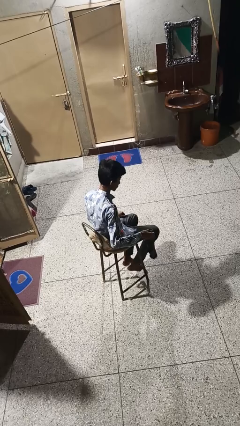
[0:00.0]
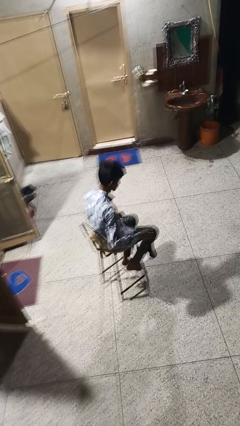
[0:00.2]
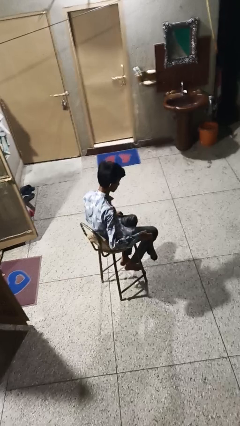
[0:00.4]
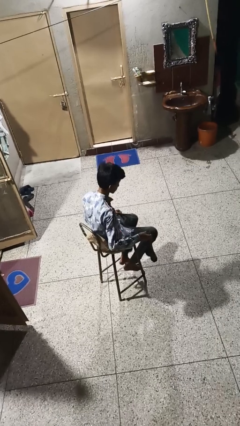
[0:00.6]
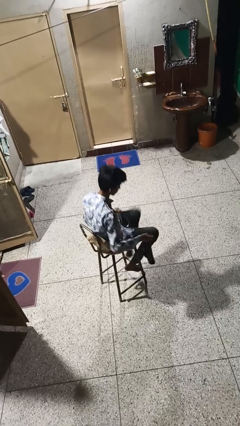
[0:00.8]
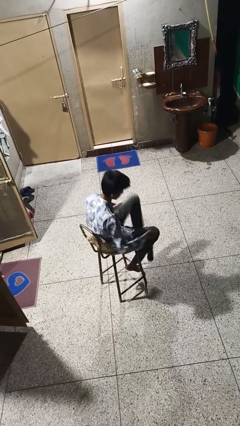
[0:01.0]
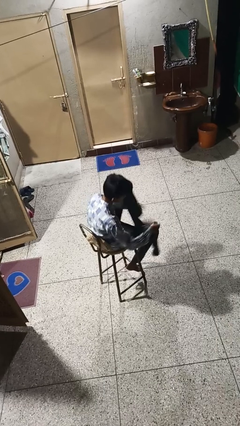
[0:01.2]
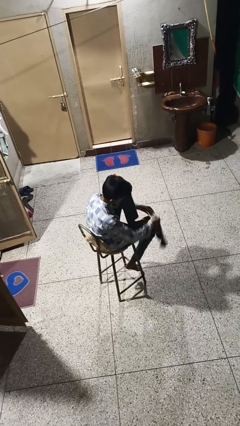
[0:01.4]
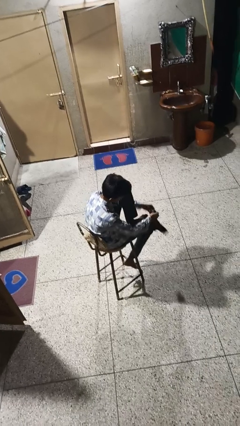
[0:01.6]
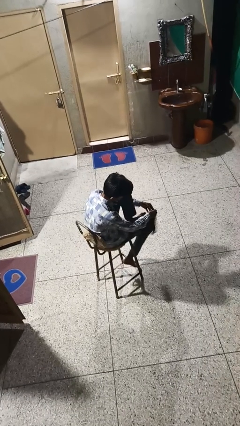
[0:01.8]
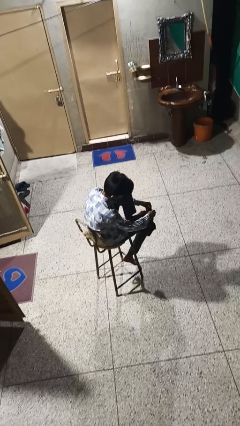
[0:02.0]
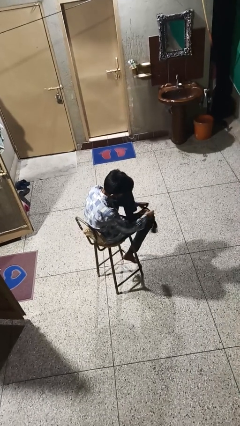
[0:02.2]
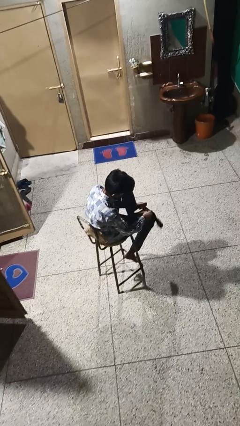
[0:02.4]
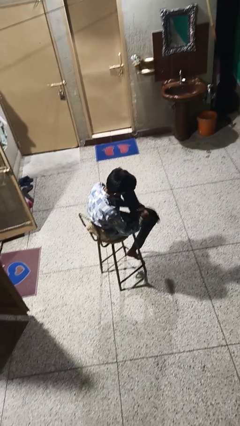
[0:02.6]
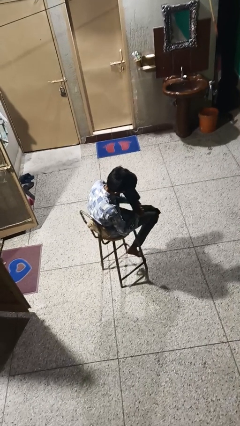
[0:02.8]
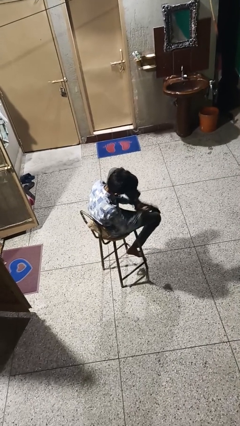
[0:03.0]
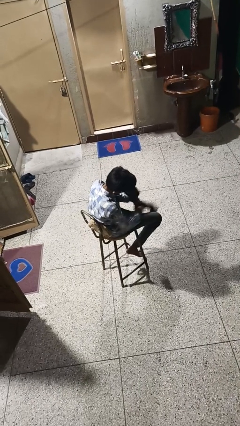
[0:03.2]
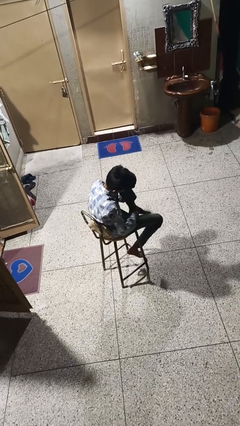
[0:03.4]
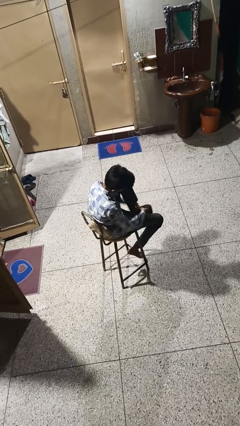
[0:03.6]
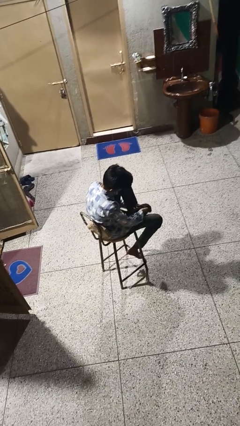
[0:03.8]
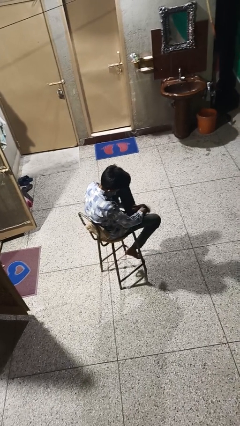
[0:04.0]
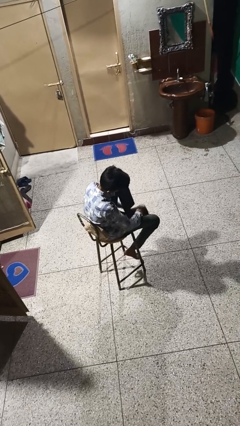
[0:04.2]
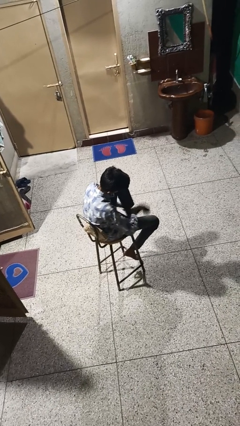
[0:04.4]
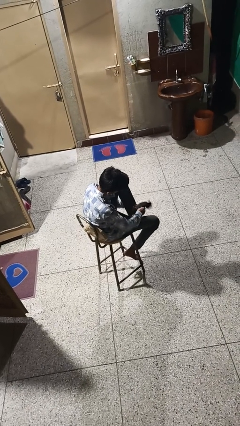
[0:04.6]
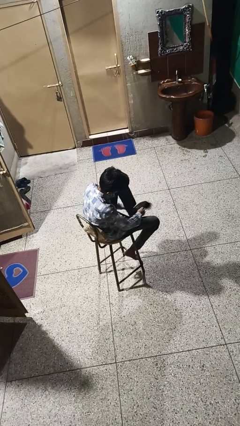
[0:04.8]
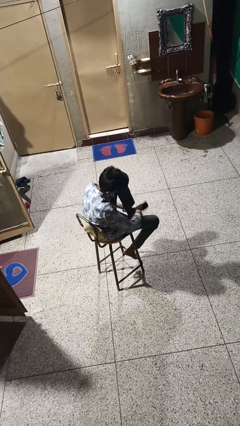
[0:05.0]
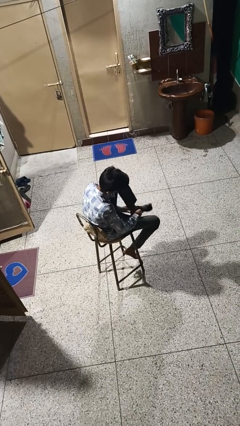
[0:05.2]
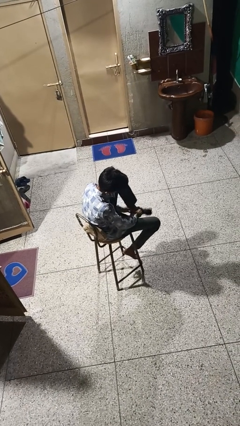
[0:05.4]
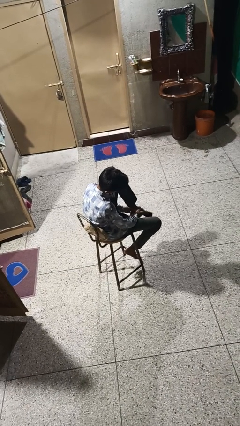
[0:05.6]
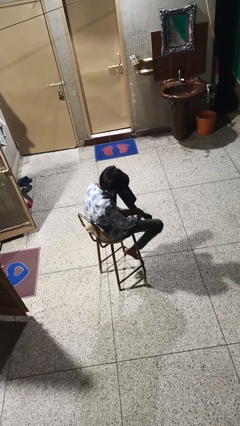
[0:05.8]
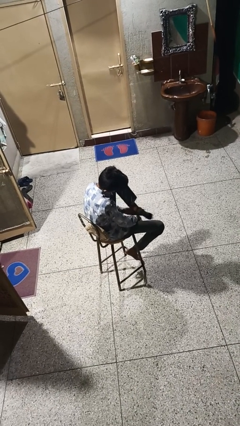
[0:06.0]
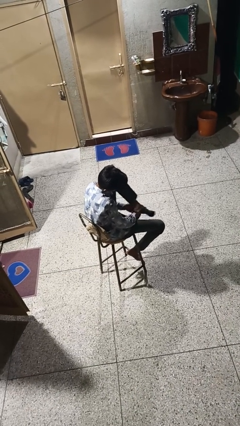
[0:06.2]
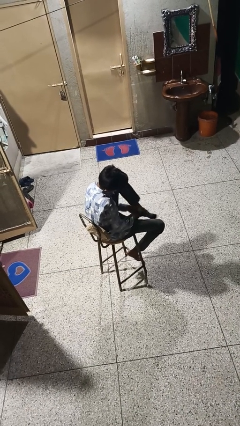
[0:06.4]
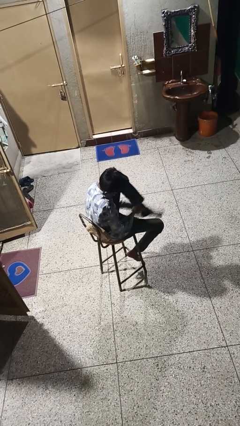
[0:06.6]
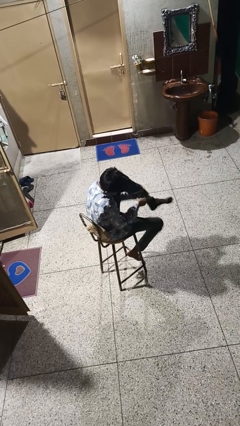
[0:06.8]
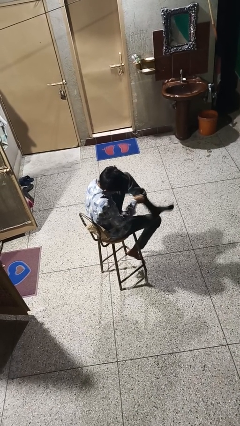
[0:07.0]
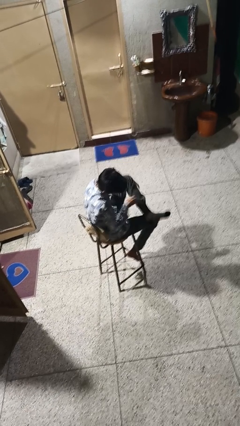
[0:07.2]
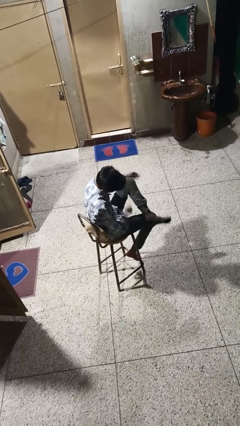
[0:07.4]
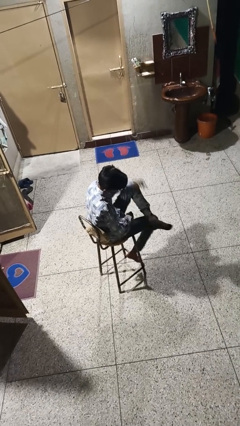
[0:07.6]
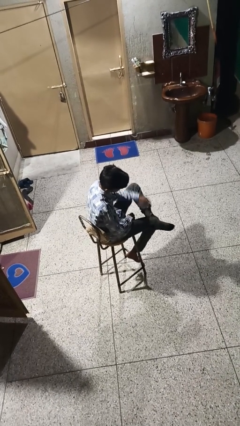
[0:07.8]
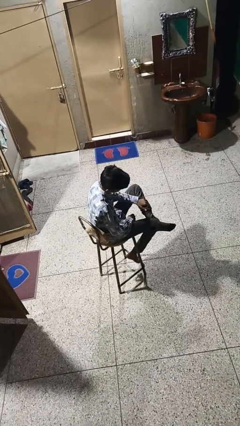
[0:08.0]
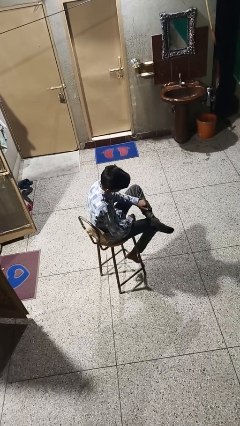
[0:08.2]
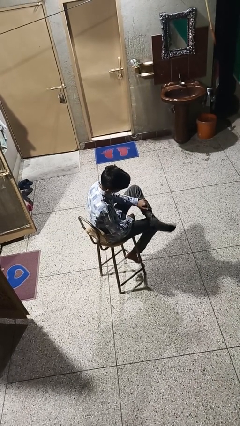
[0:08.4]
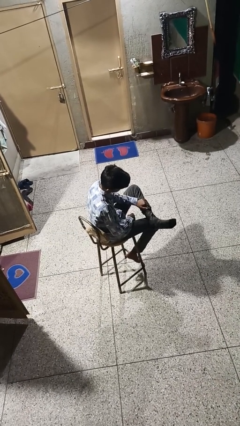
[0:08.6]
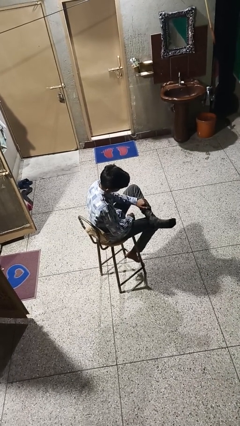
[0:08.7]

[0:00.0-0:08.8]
person puts on socks

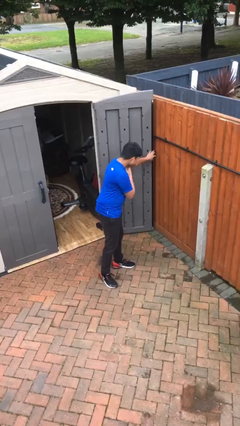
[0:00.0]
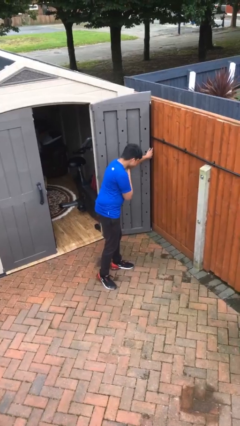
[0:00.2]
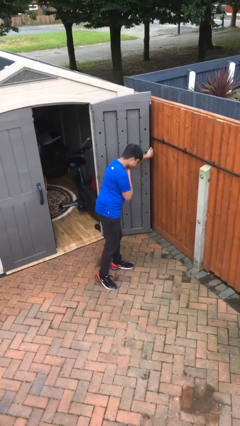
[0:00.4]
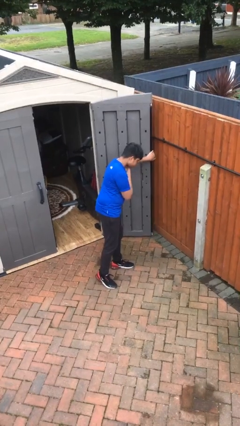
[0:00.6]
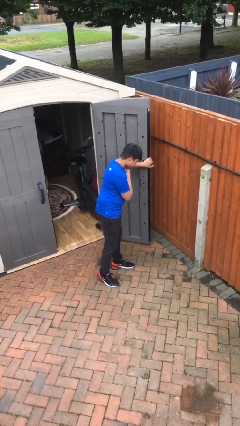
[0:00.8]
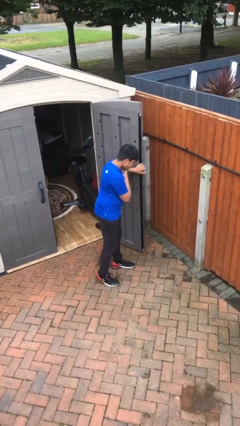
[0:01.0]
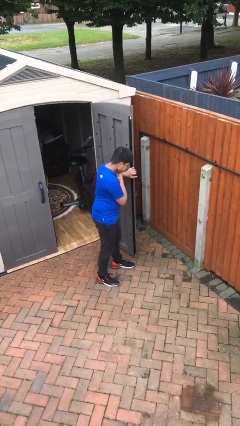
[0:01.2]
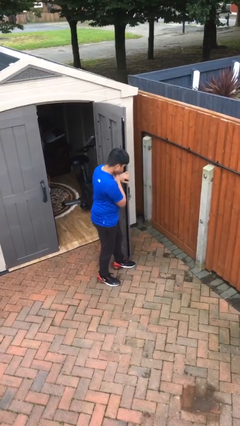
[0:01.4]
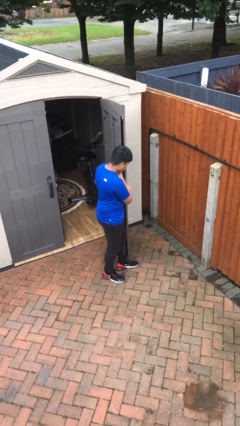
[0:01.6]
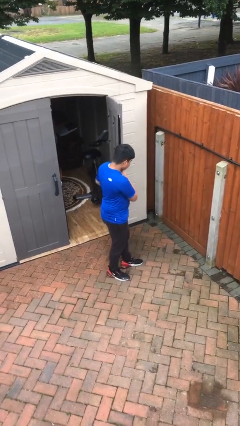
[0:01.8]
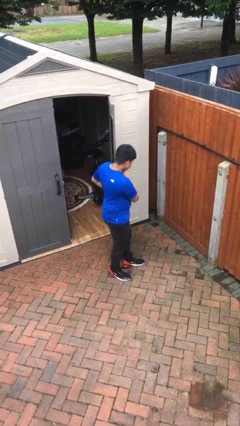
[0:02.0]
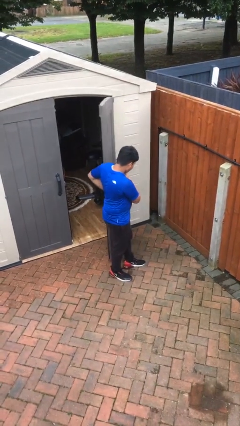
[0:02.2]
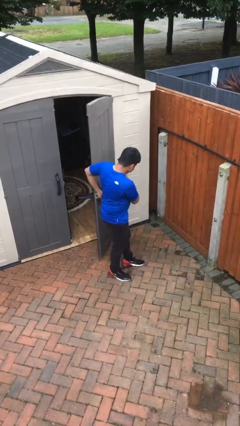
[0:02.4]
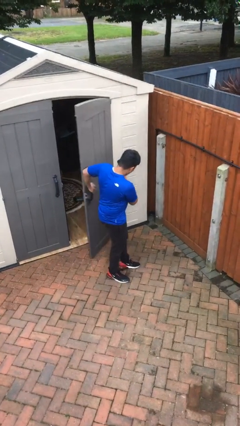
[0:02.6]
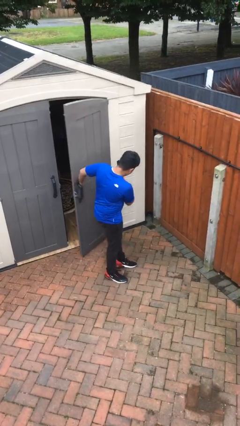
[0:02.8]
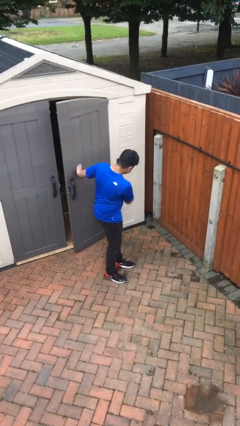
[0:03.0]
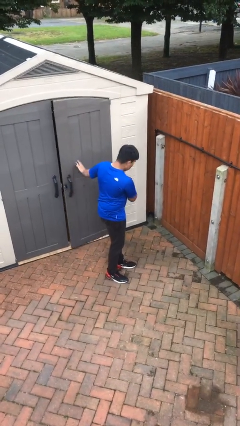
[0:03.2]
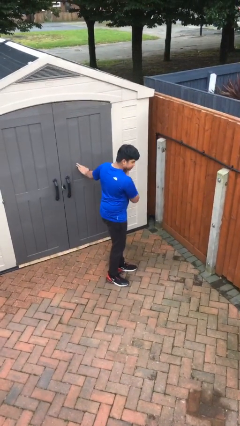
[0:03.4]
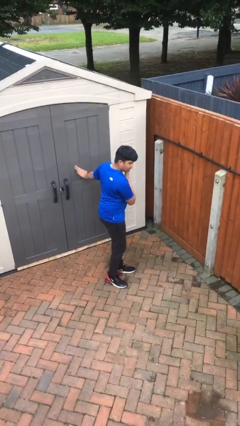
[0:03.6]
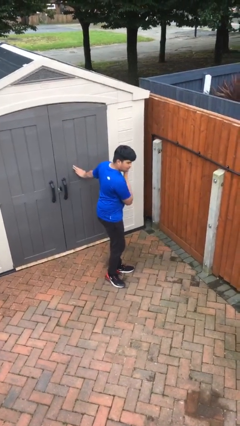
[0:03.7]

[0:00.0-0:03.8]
person closes facility door

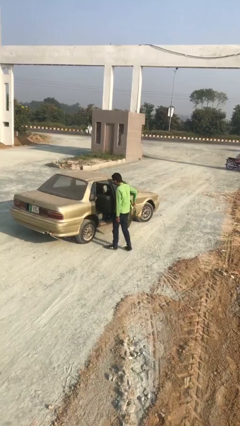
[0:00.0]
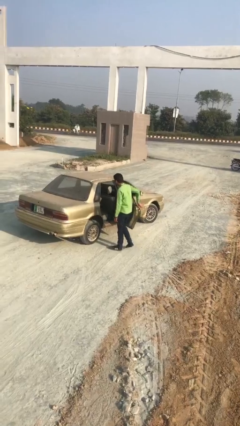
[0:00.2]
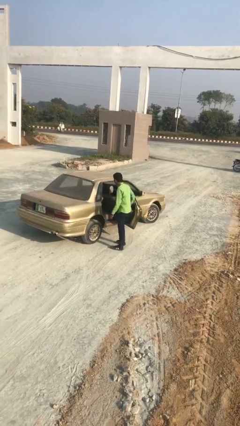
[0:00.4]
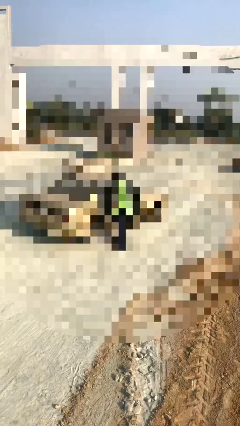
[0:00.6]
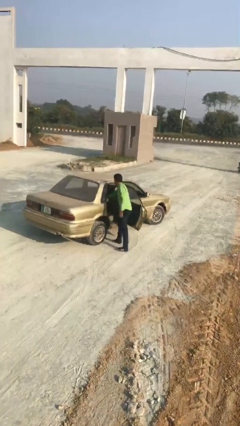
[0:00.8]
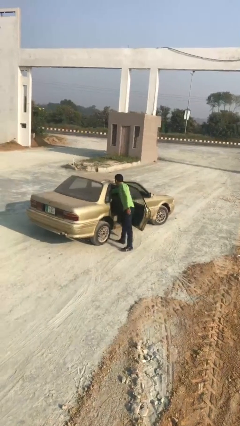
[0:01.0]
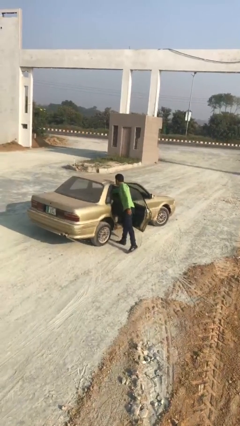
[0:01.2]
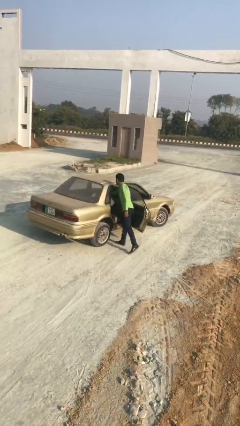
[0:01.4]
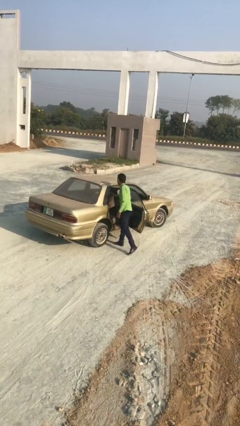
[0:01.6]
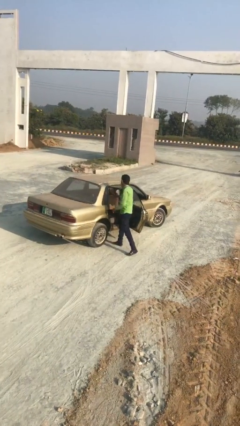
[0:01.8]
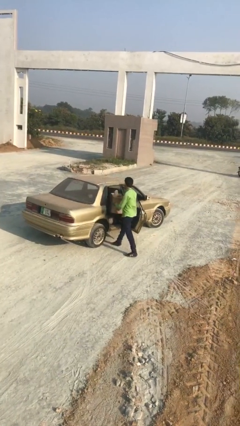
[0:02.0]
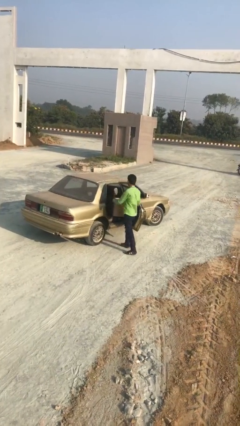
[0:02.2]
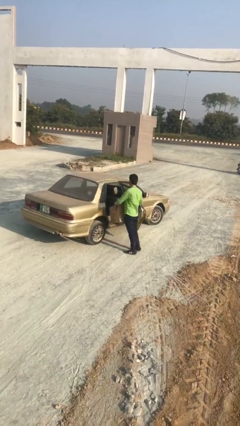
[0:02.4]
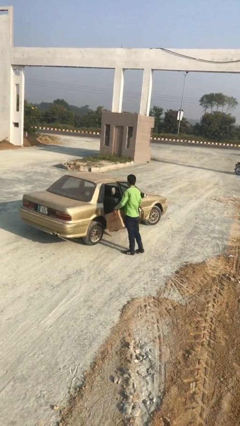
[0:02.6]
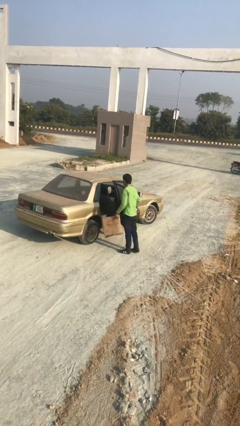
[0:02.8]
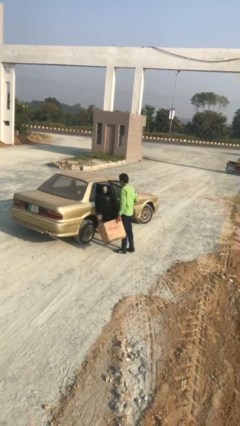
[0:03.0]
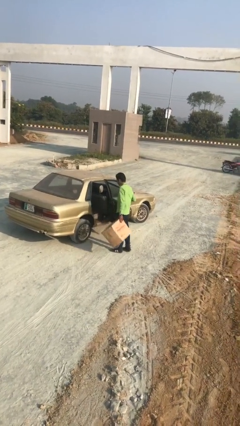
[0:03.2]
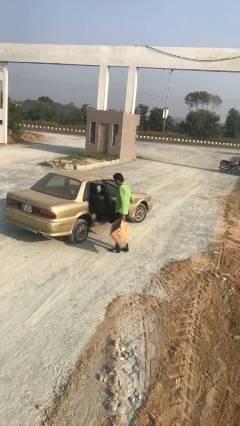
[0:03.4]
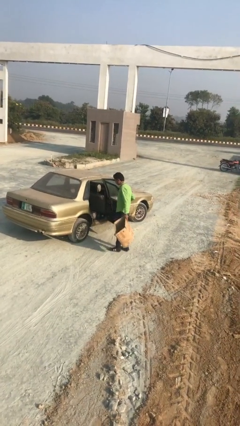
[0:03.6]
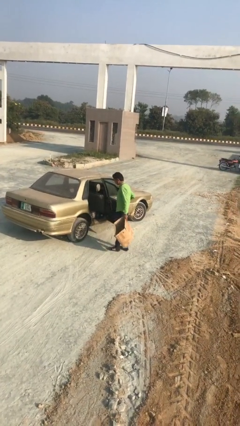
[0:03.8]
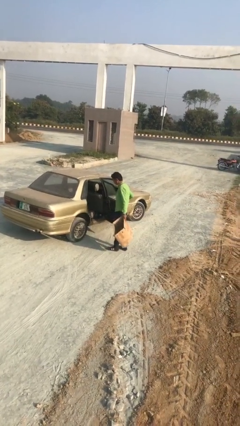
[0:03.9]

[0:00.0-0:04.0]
person unloads car

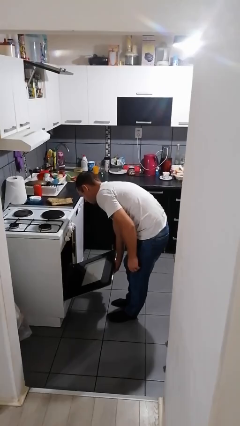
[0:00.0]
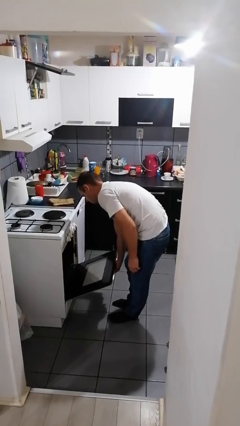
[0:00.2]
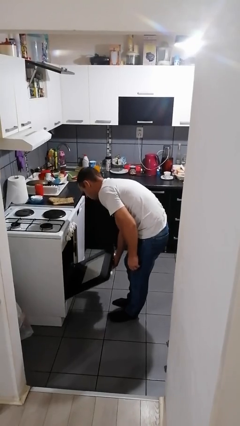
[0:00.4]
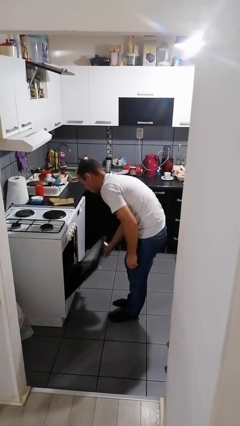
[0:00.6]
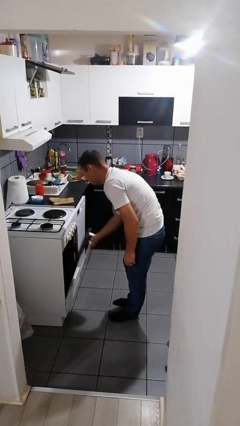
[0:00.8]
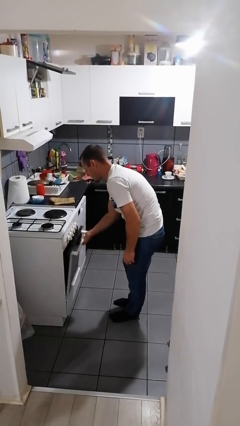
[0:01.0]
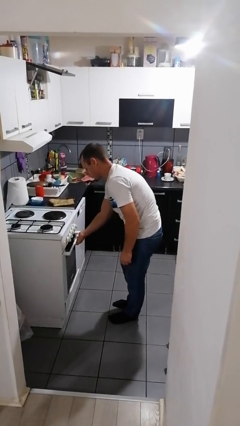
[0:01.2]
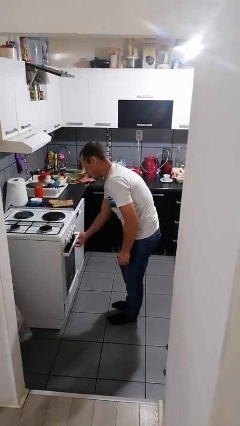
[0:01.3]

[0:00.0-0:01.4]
person closes oven door

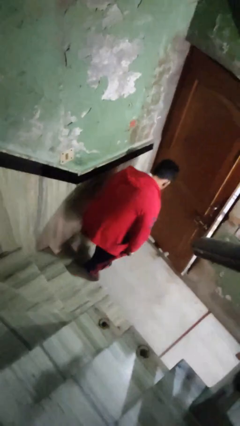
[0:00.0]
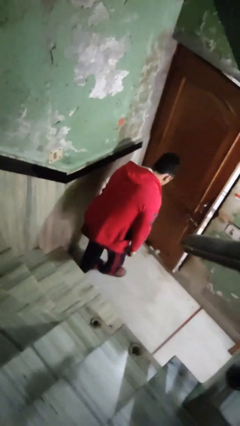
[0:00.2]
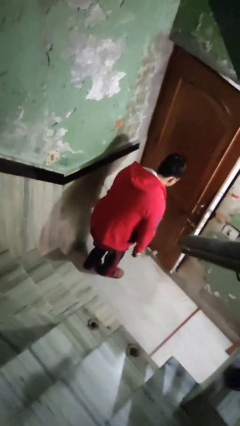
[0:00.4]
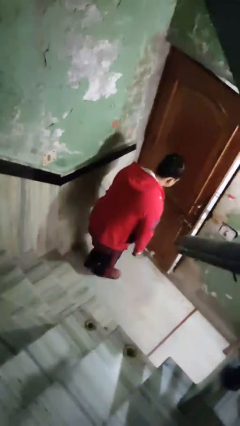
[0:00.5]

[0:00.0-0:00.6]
person trips on stair
